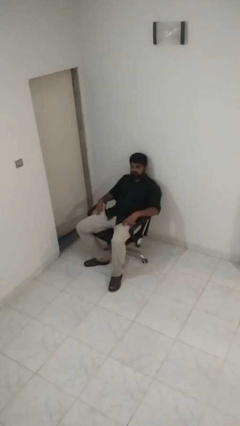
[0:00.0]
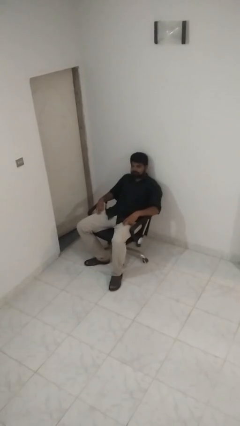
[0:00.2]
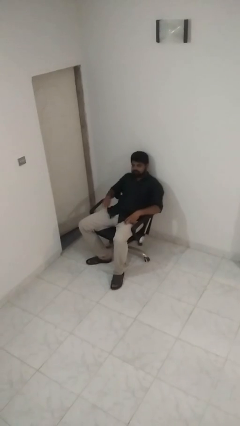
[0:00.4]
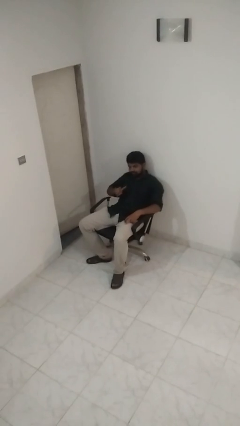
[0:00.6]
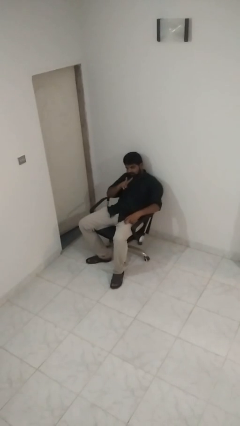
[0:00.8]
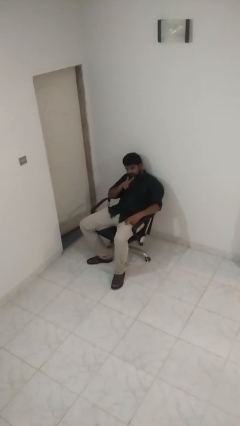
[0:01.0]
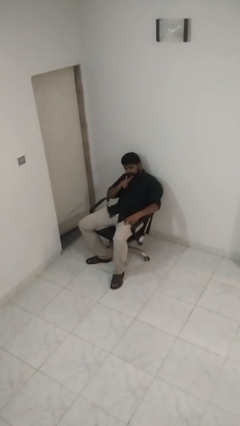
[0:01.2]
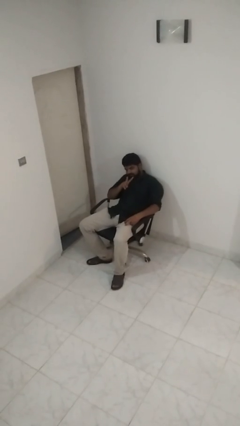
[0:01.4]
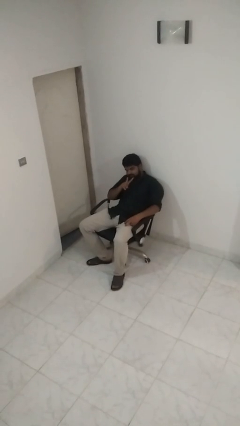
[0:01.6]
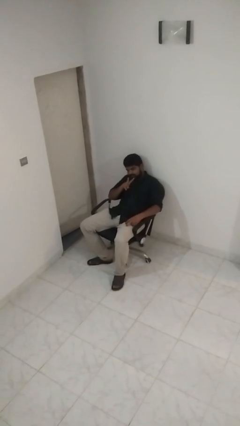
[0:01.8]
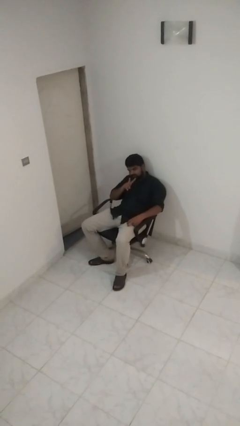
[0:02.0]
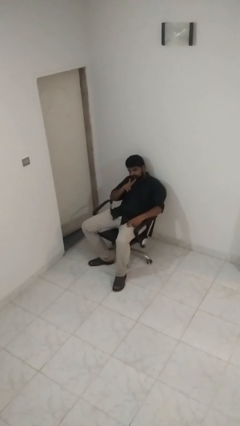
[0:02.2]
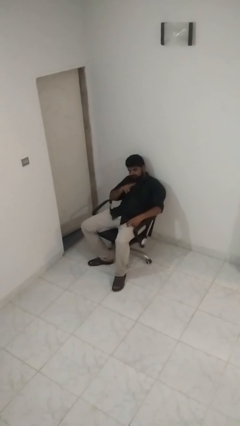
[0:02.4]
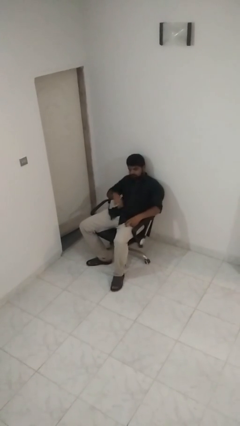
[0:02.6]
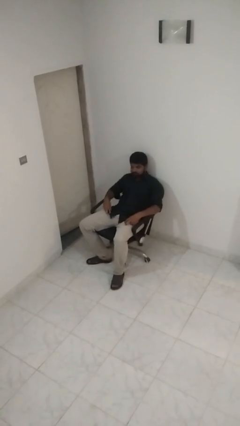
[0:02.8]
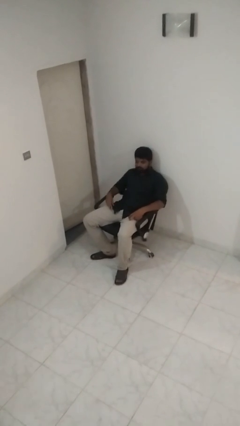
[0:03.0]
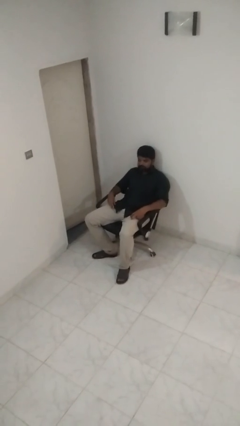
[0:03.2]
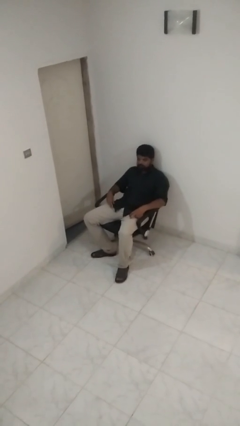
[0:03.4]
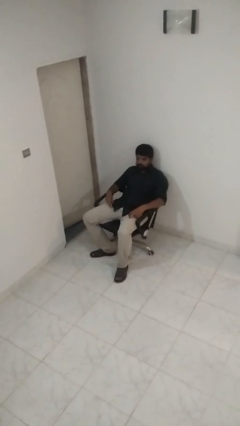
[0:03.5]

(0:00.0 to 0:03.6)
person gestures peace

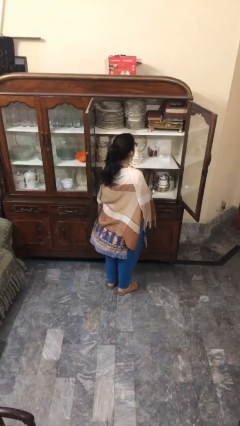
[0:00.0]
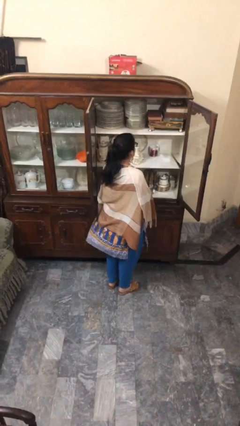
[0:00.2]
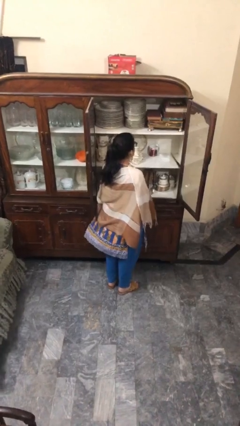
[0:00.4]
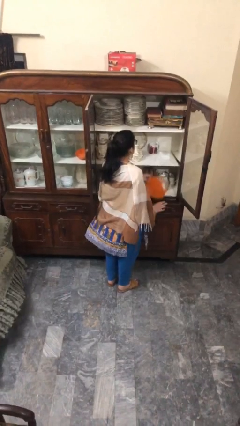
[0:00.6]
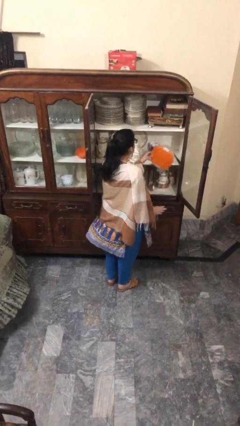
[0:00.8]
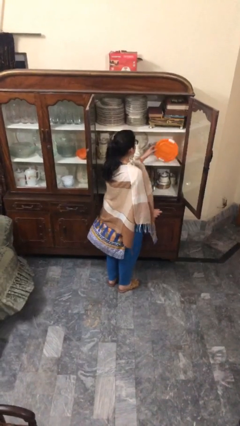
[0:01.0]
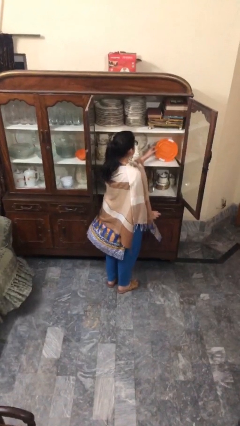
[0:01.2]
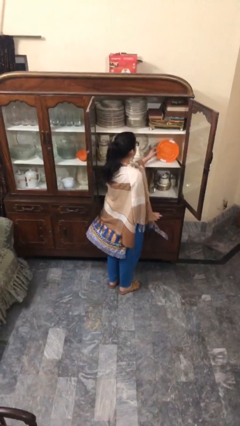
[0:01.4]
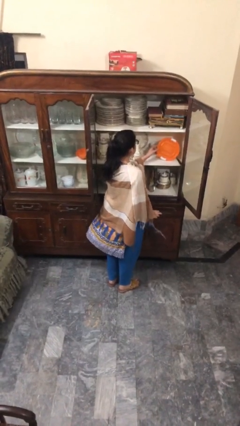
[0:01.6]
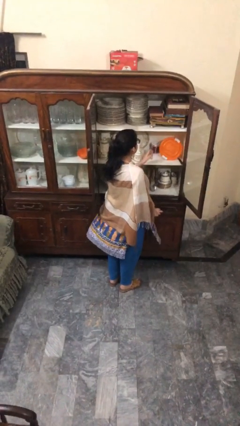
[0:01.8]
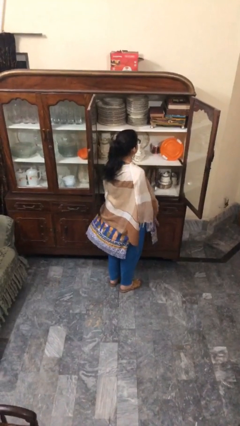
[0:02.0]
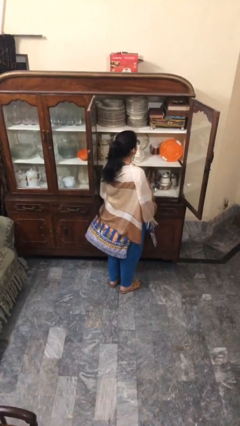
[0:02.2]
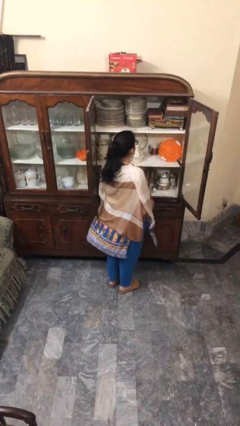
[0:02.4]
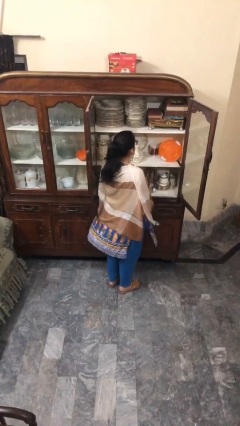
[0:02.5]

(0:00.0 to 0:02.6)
person puts object in cabinet

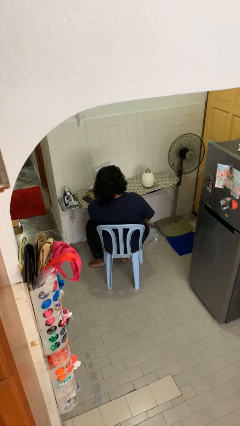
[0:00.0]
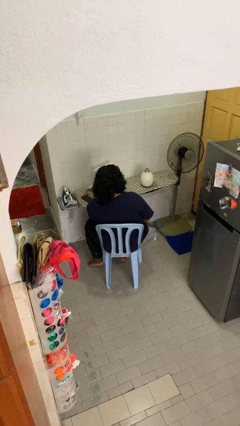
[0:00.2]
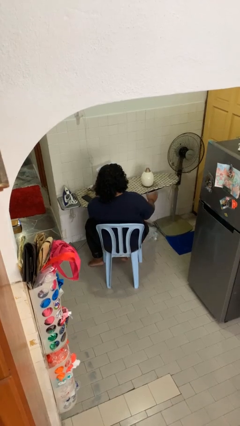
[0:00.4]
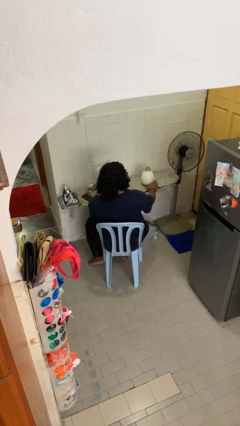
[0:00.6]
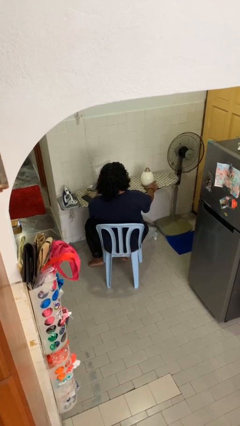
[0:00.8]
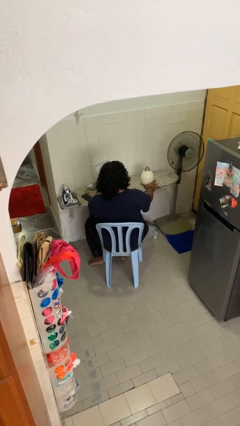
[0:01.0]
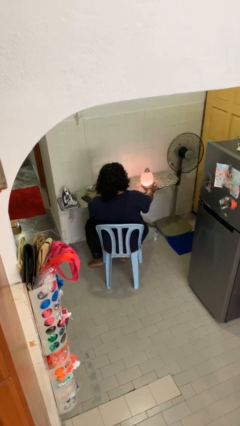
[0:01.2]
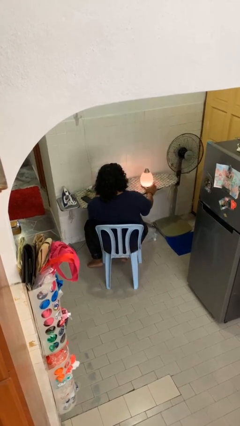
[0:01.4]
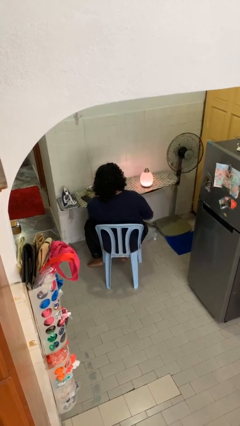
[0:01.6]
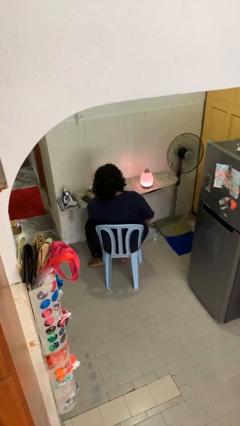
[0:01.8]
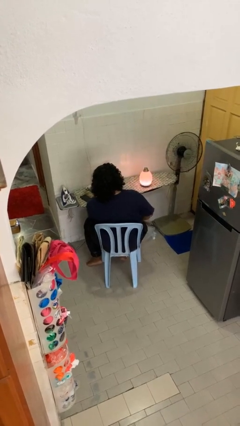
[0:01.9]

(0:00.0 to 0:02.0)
person turns on lamp

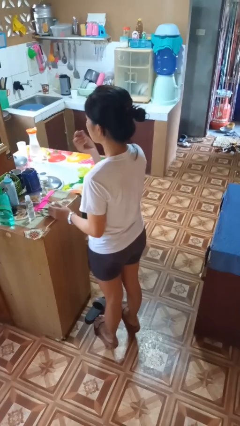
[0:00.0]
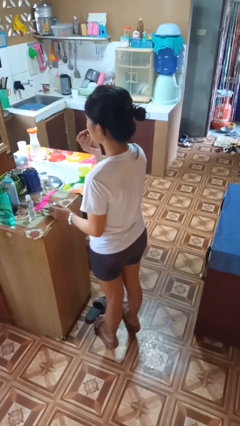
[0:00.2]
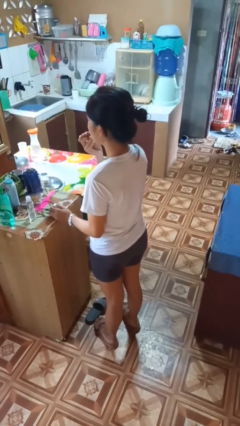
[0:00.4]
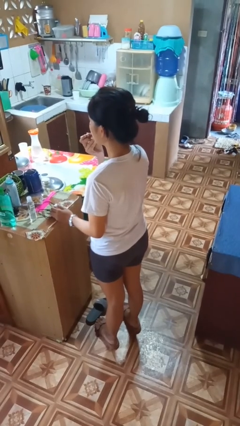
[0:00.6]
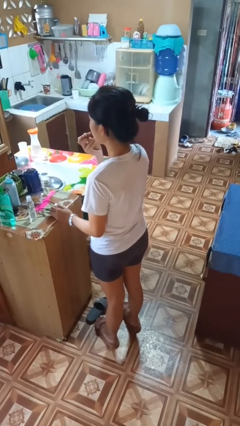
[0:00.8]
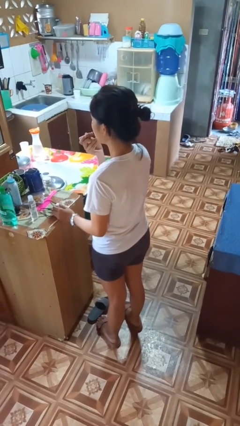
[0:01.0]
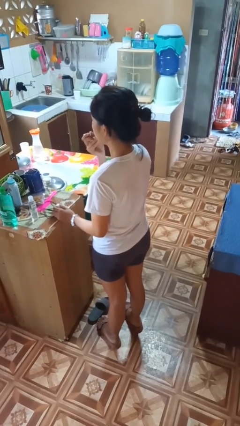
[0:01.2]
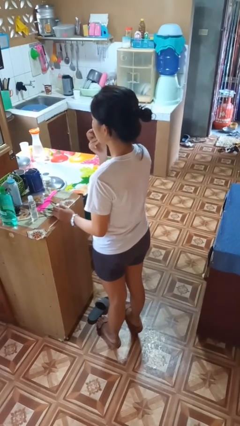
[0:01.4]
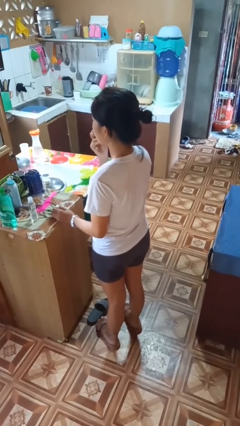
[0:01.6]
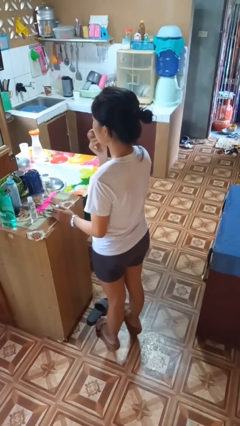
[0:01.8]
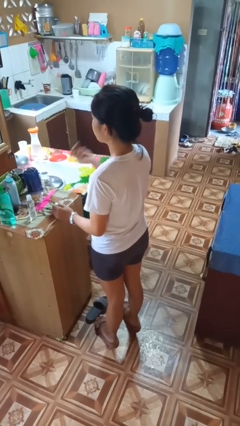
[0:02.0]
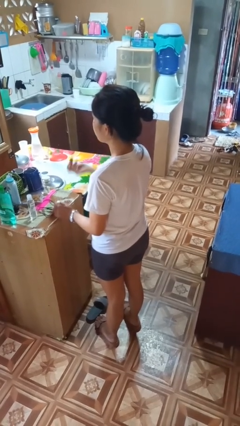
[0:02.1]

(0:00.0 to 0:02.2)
person applies lip makeup

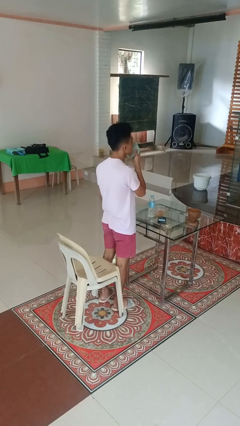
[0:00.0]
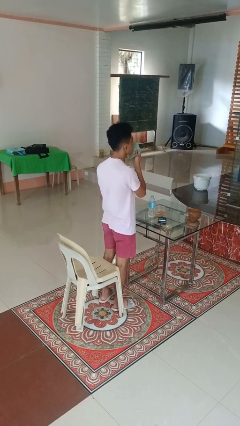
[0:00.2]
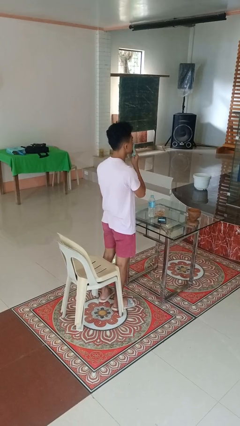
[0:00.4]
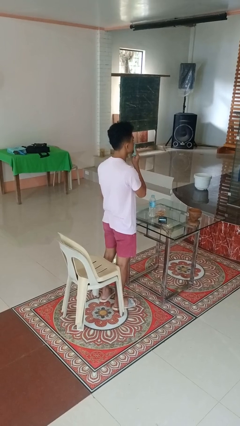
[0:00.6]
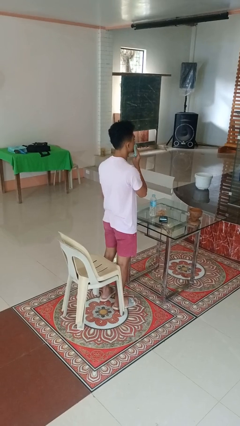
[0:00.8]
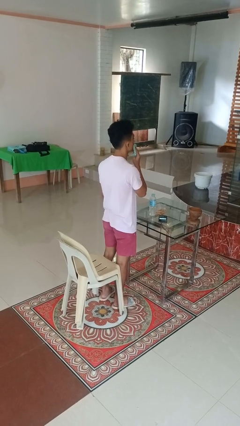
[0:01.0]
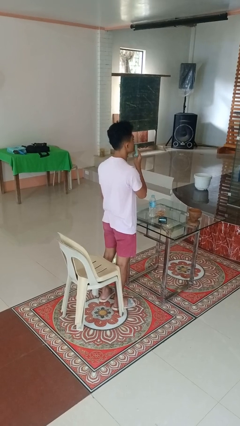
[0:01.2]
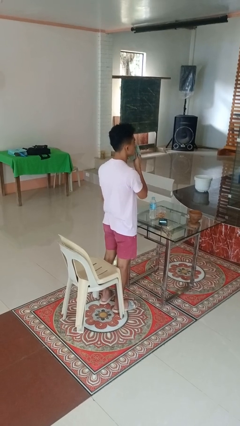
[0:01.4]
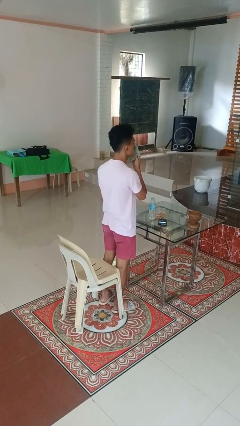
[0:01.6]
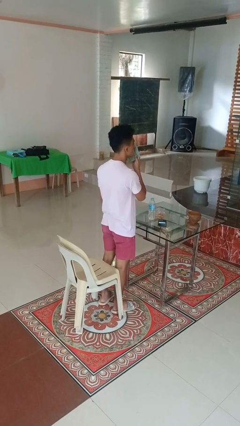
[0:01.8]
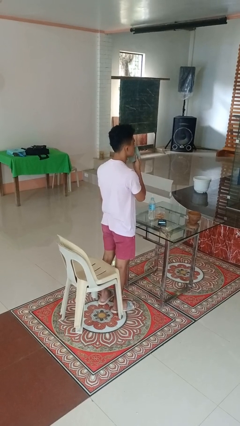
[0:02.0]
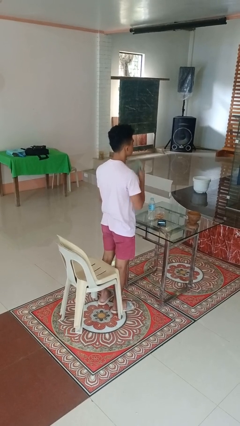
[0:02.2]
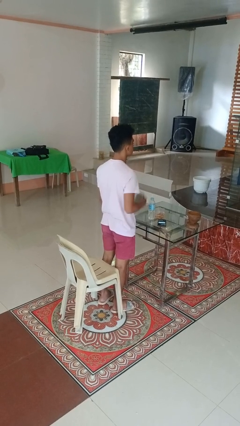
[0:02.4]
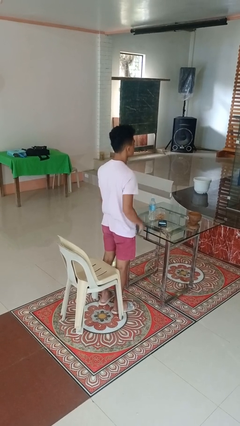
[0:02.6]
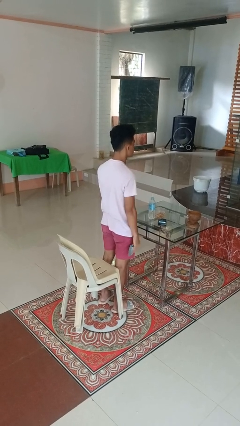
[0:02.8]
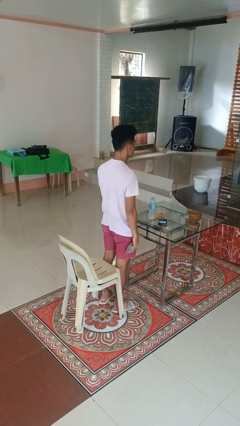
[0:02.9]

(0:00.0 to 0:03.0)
person wipes mouth with napkin

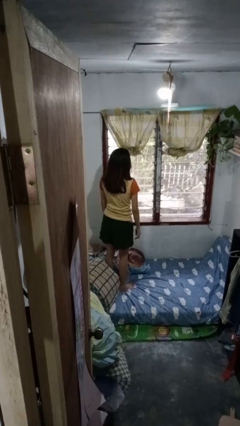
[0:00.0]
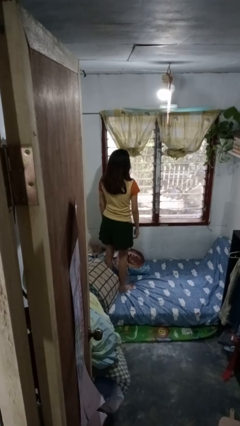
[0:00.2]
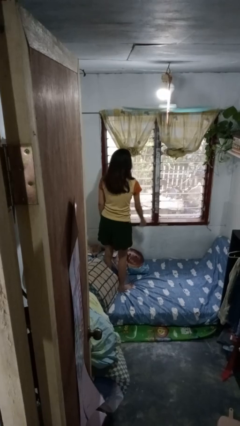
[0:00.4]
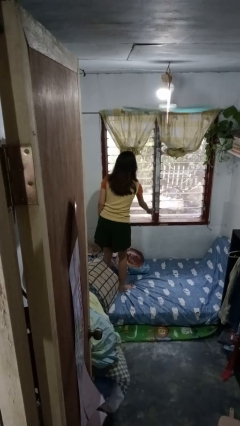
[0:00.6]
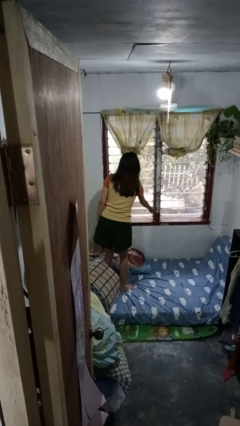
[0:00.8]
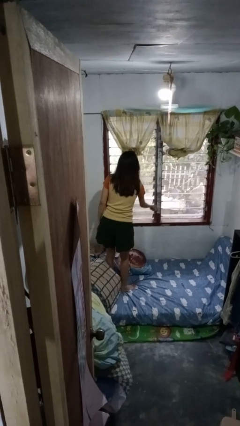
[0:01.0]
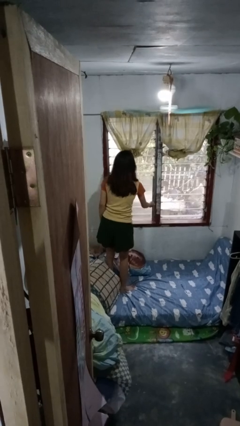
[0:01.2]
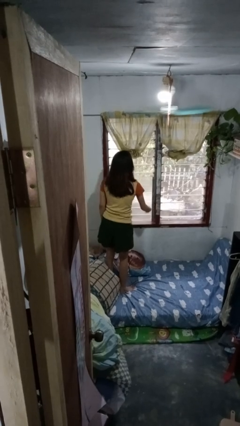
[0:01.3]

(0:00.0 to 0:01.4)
person closes home window

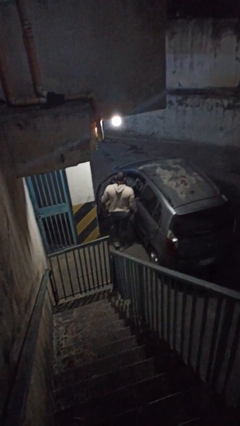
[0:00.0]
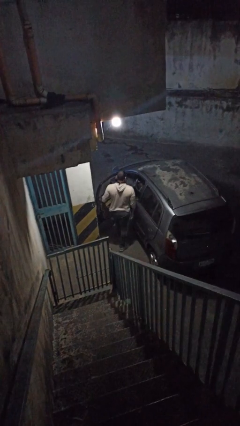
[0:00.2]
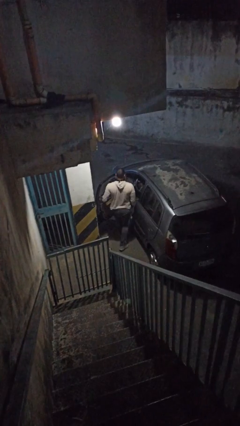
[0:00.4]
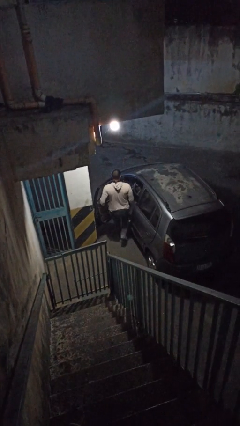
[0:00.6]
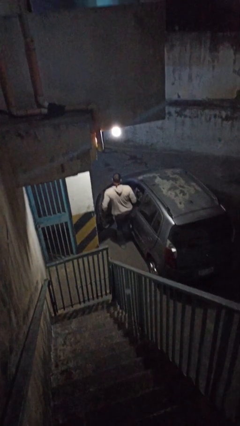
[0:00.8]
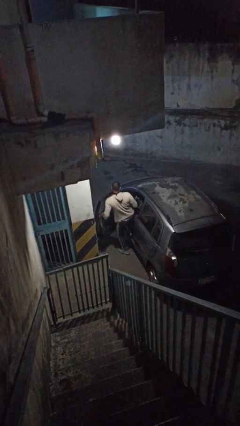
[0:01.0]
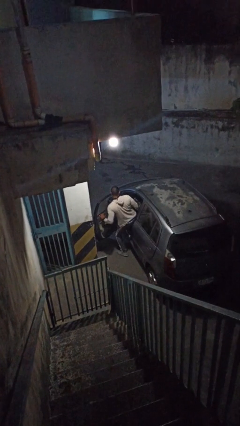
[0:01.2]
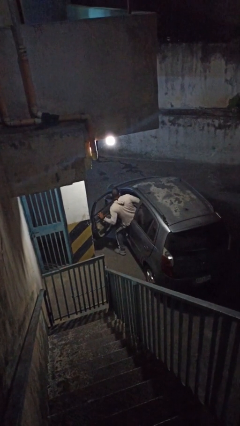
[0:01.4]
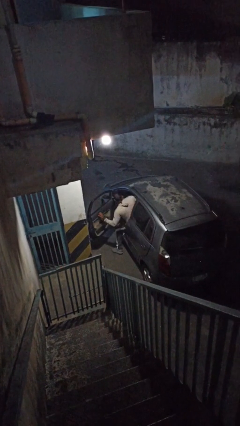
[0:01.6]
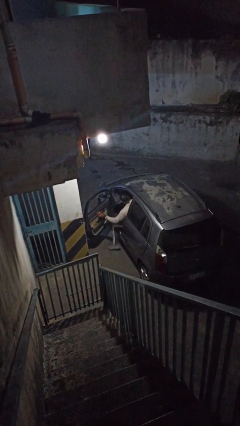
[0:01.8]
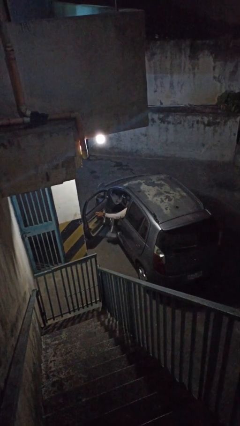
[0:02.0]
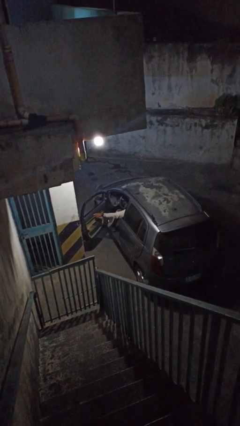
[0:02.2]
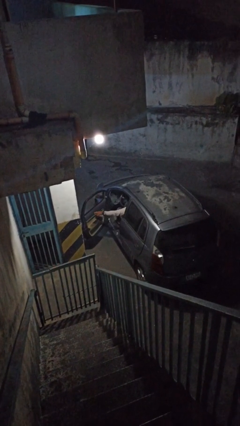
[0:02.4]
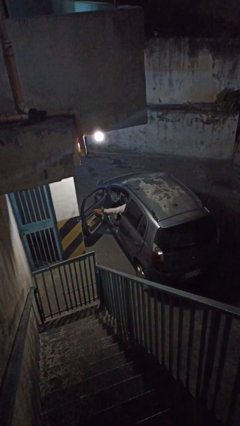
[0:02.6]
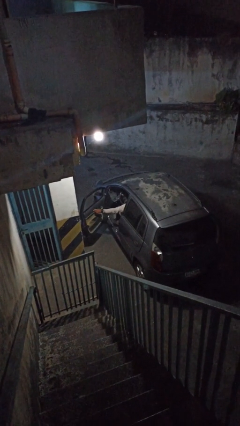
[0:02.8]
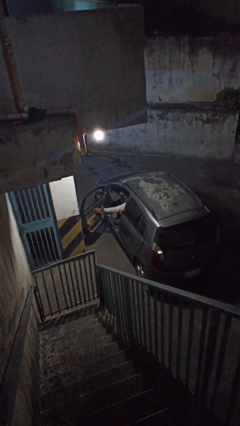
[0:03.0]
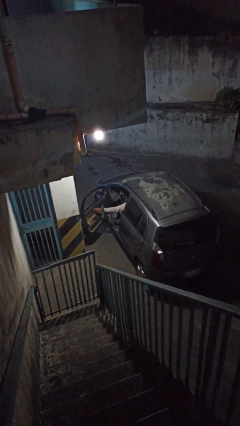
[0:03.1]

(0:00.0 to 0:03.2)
person enters car
